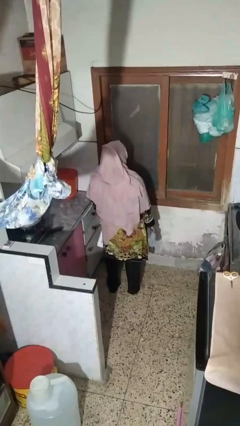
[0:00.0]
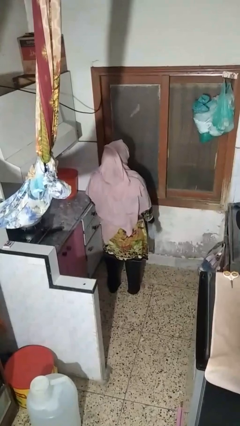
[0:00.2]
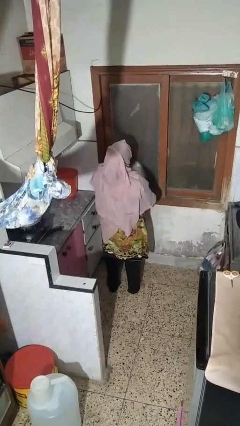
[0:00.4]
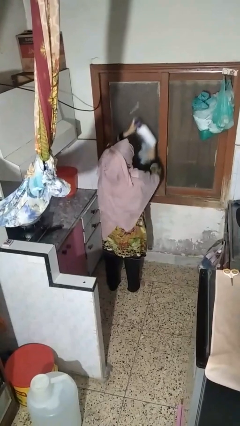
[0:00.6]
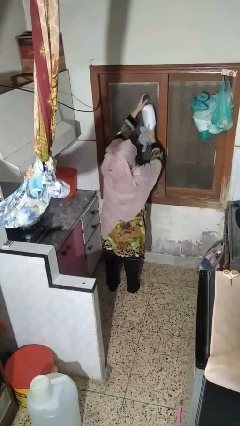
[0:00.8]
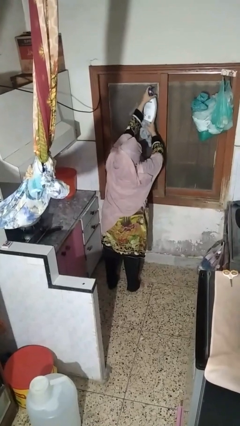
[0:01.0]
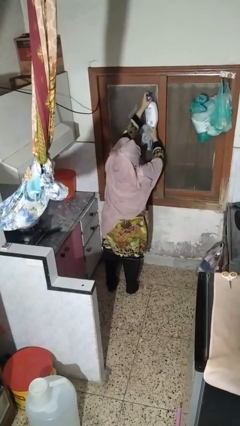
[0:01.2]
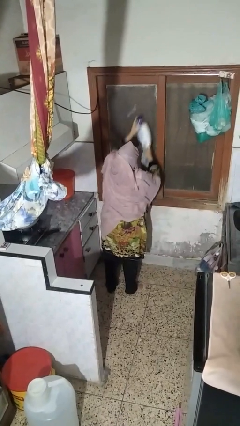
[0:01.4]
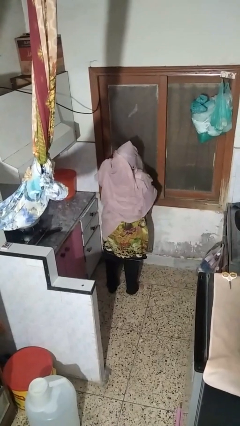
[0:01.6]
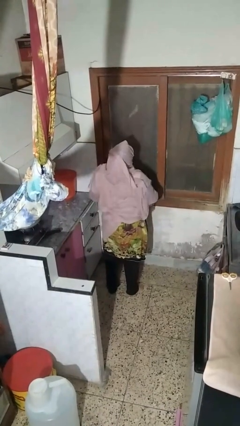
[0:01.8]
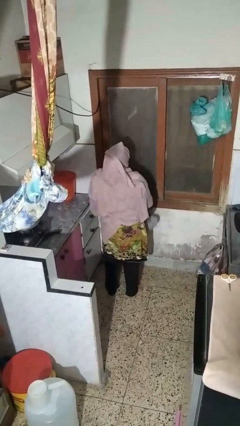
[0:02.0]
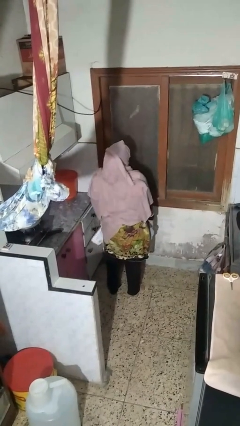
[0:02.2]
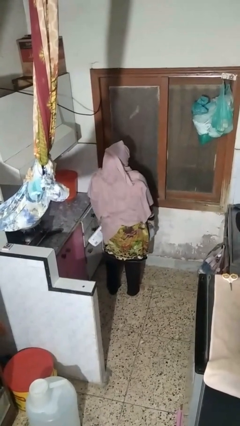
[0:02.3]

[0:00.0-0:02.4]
person sprays from bottle

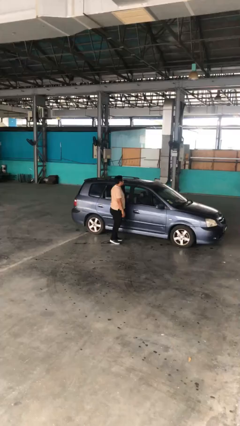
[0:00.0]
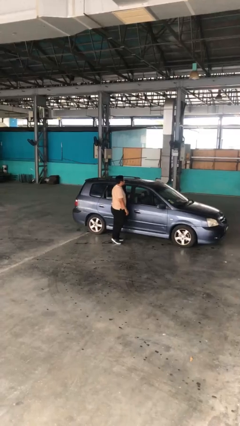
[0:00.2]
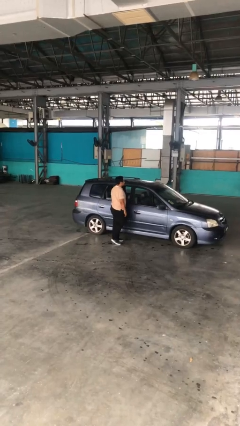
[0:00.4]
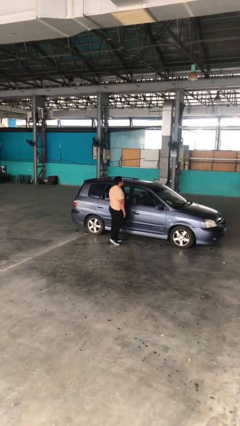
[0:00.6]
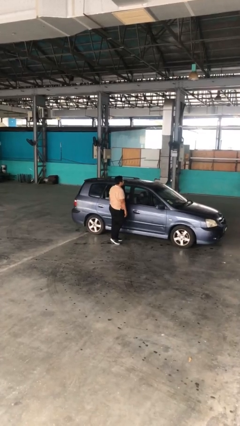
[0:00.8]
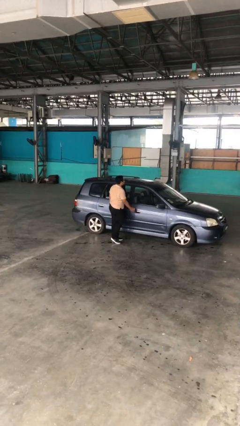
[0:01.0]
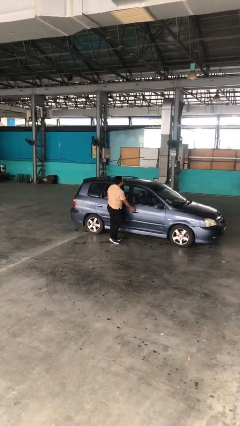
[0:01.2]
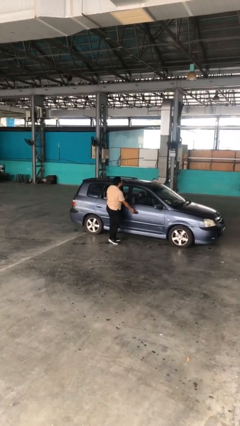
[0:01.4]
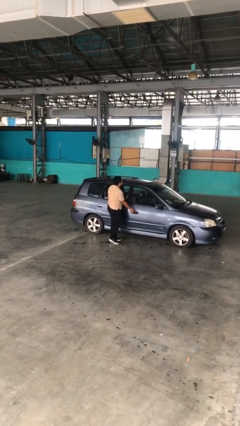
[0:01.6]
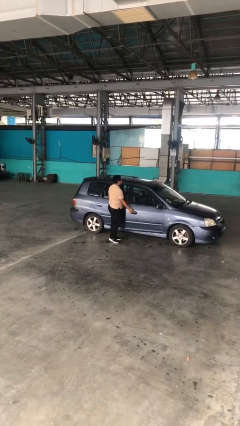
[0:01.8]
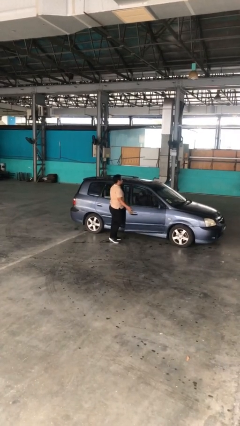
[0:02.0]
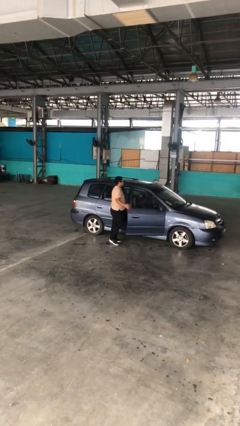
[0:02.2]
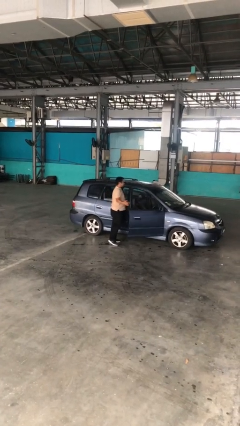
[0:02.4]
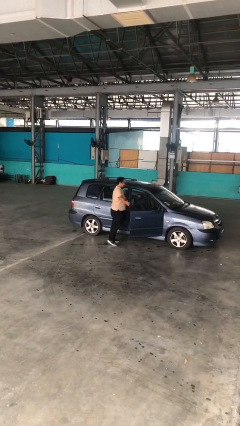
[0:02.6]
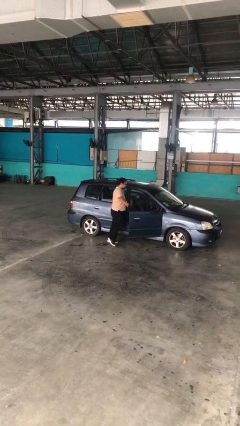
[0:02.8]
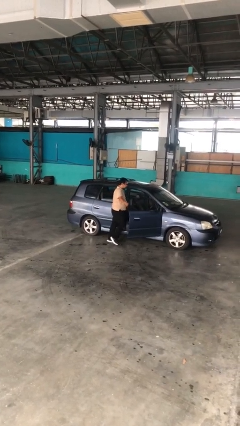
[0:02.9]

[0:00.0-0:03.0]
person opens car door

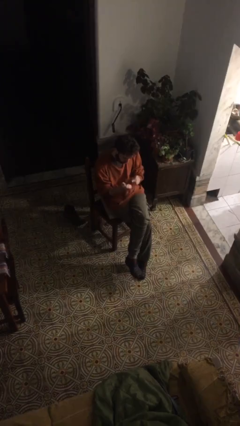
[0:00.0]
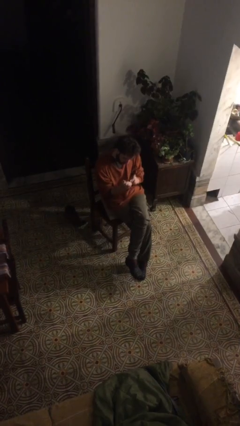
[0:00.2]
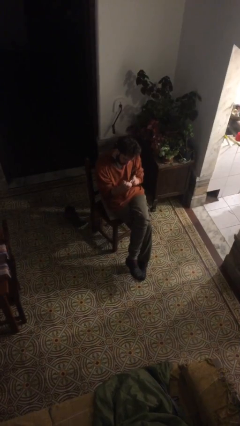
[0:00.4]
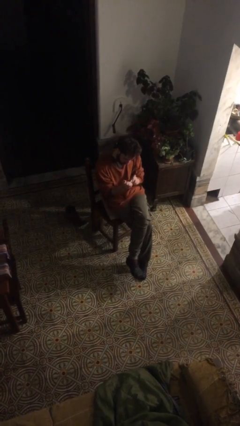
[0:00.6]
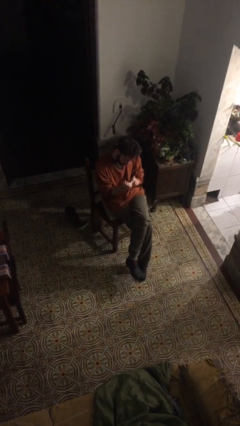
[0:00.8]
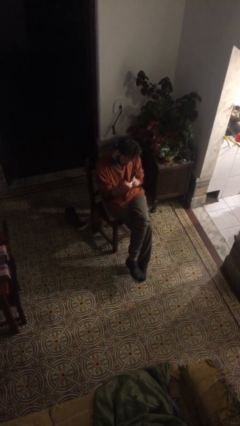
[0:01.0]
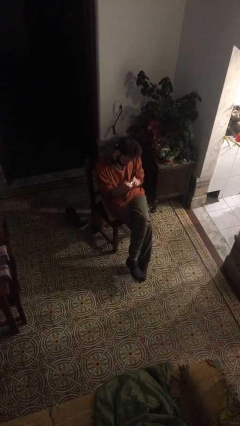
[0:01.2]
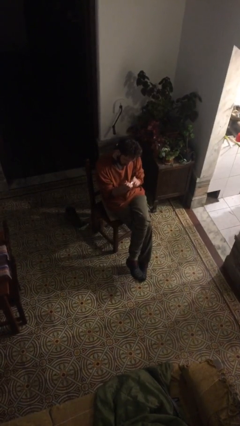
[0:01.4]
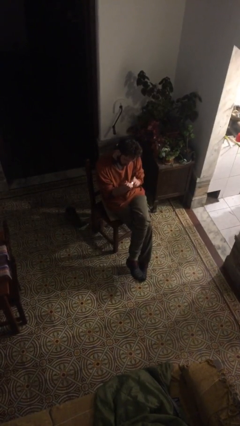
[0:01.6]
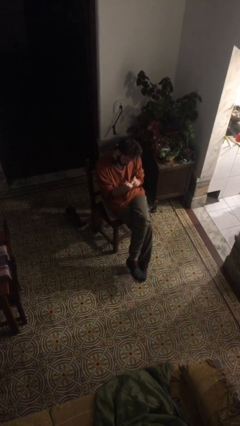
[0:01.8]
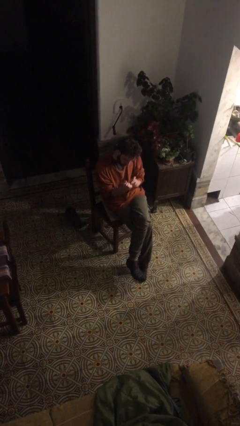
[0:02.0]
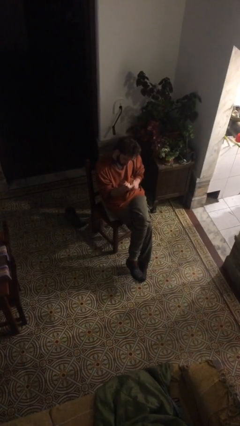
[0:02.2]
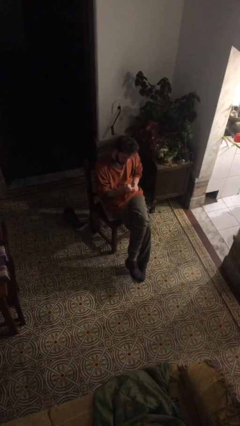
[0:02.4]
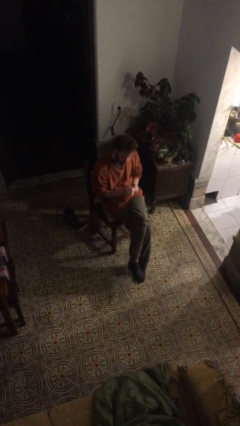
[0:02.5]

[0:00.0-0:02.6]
person clips fingernails

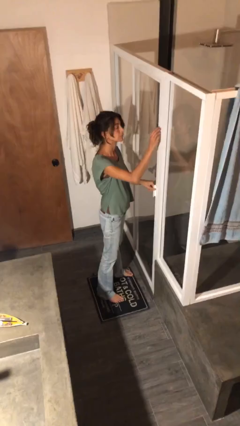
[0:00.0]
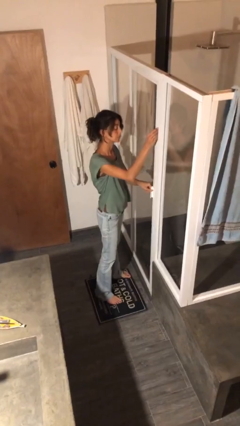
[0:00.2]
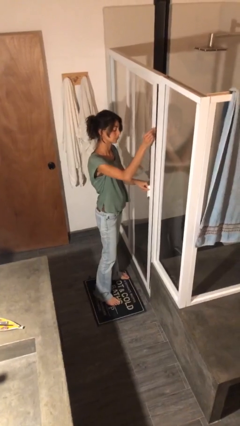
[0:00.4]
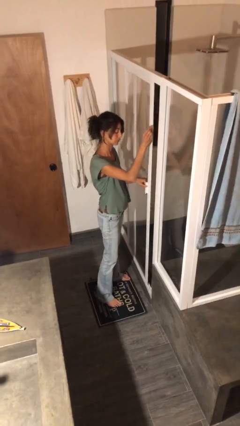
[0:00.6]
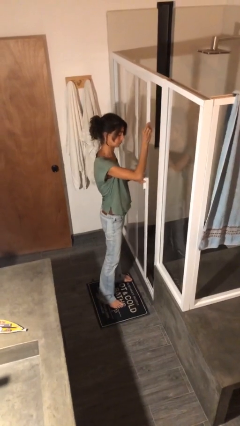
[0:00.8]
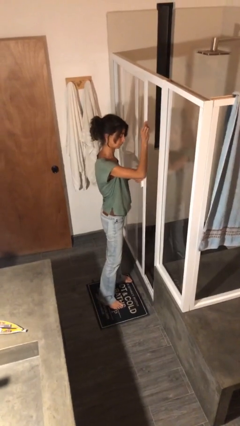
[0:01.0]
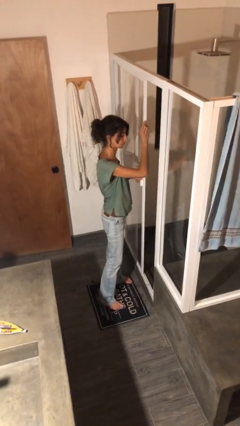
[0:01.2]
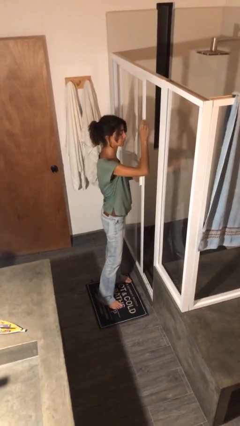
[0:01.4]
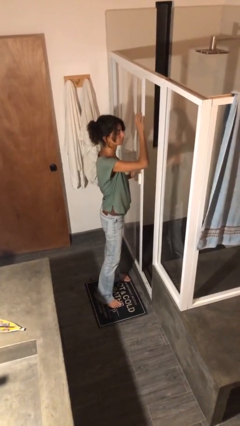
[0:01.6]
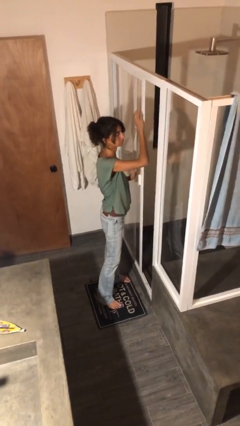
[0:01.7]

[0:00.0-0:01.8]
person opens sliding door

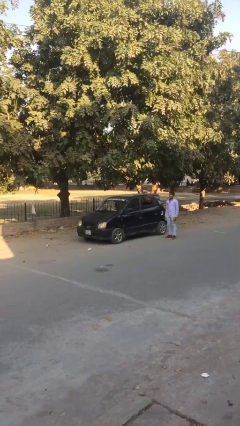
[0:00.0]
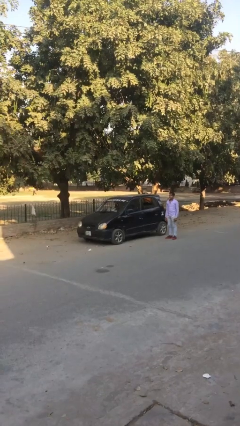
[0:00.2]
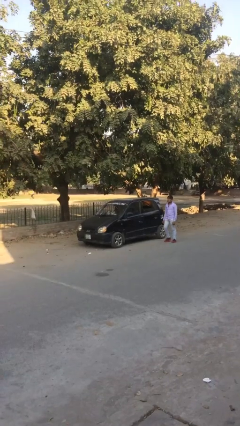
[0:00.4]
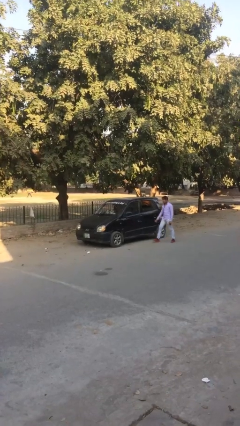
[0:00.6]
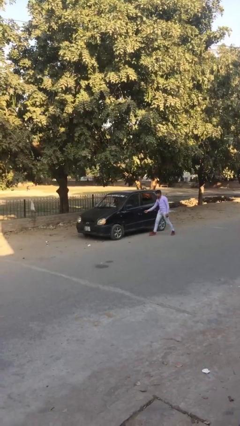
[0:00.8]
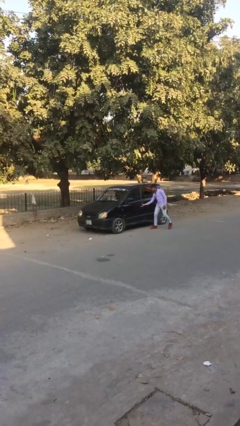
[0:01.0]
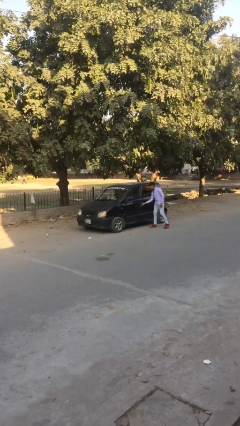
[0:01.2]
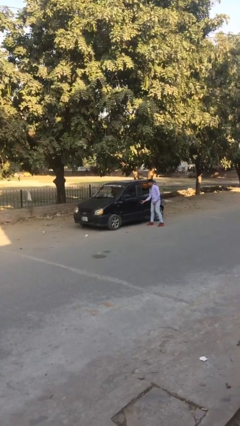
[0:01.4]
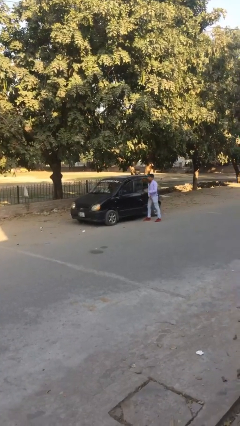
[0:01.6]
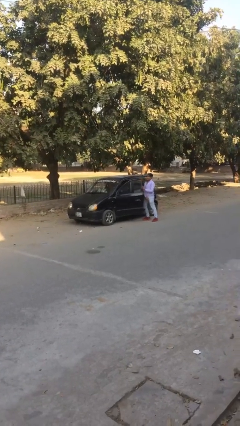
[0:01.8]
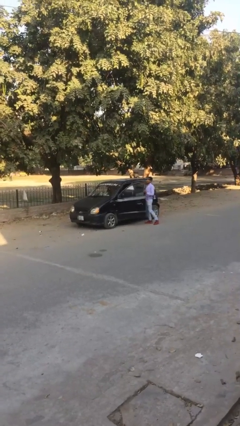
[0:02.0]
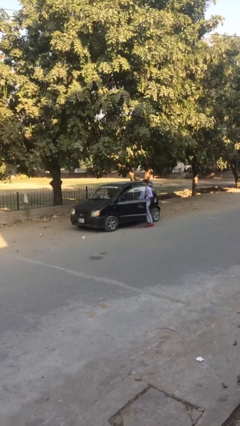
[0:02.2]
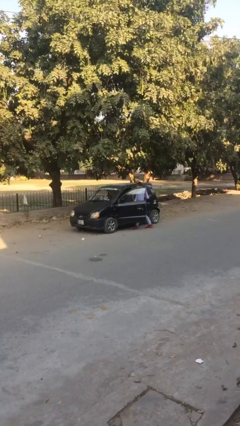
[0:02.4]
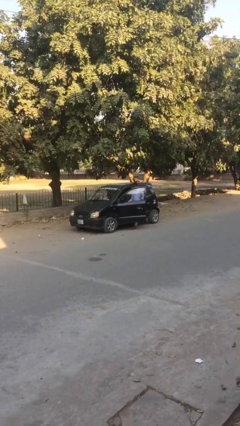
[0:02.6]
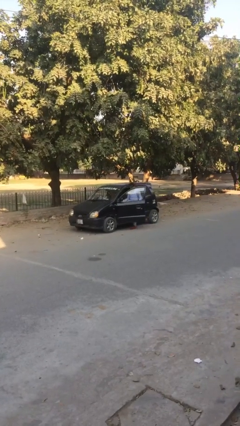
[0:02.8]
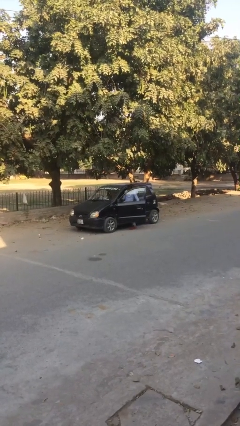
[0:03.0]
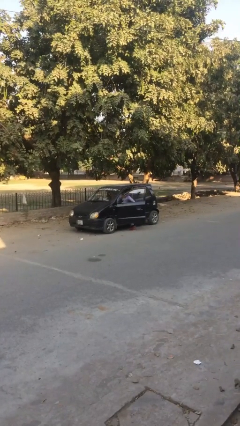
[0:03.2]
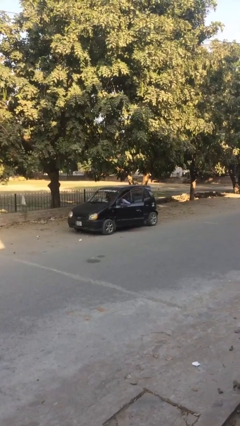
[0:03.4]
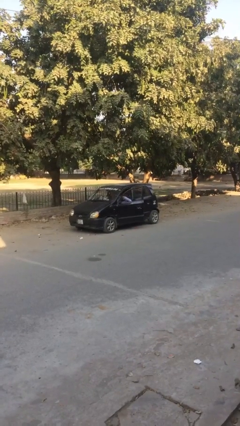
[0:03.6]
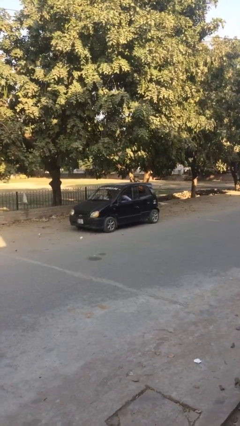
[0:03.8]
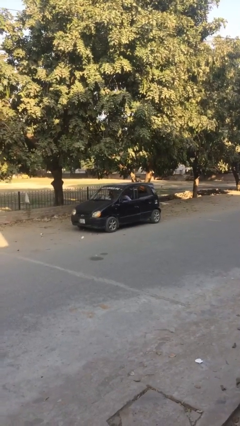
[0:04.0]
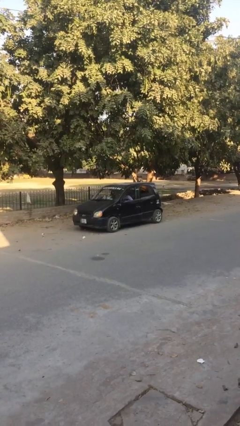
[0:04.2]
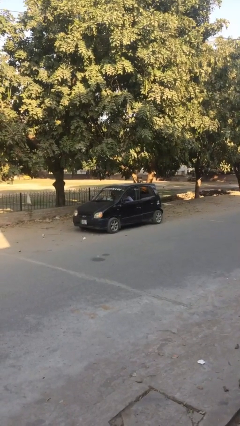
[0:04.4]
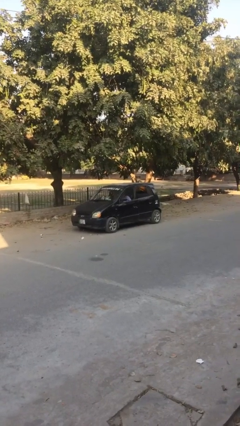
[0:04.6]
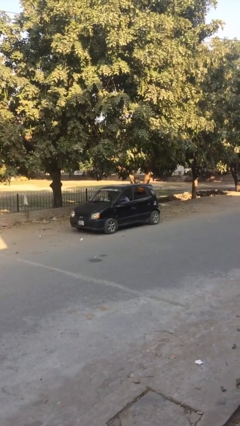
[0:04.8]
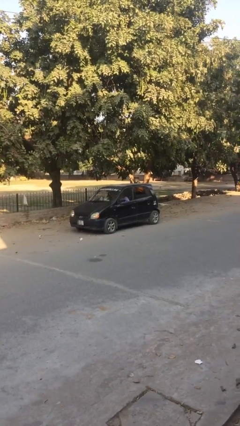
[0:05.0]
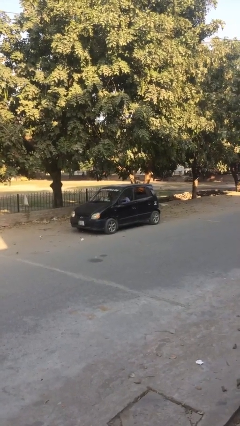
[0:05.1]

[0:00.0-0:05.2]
car picks up person

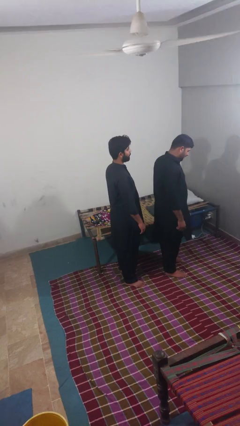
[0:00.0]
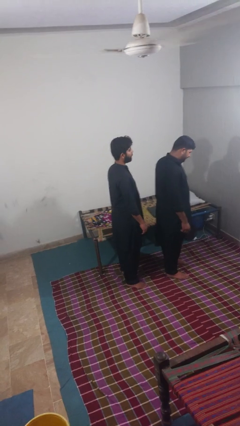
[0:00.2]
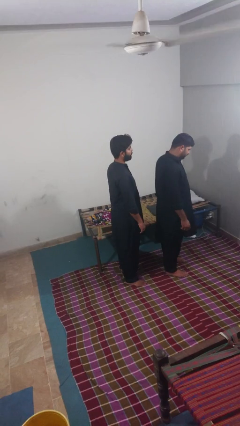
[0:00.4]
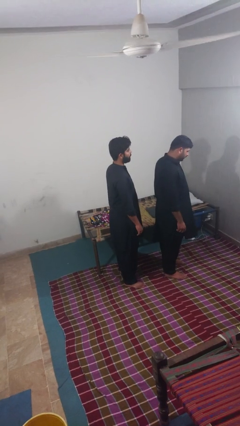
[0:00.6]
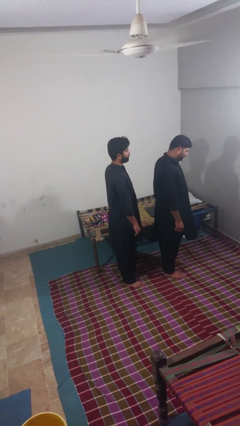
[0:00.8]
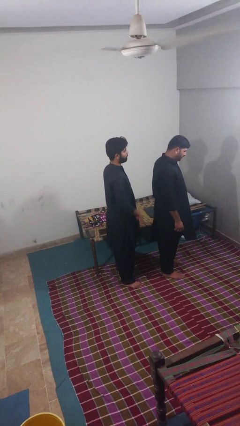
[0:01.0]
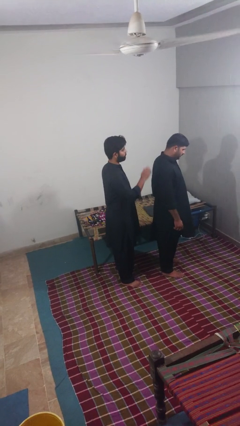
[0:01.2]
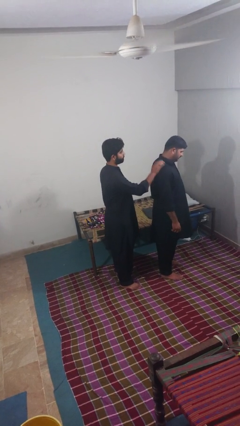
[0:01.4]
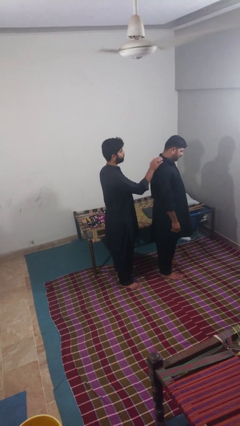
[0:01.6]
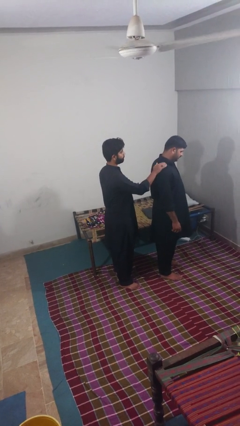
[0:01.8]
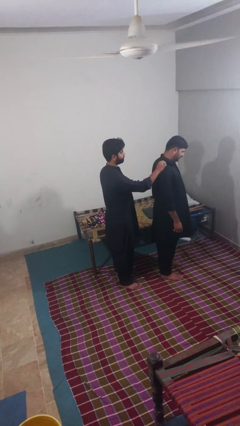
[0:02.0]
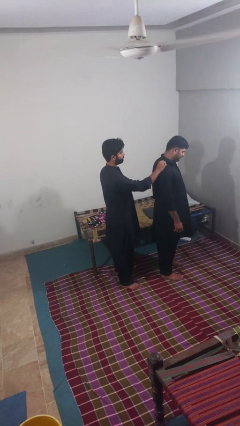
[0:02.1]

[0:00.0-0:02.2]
person touches back of person

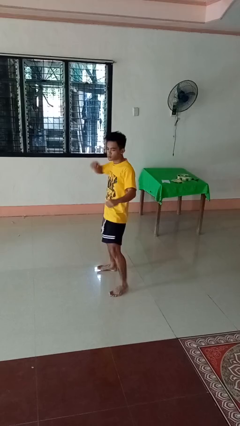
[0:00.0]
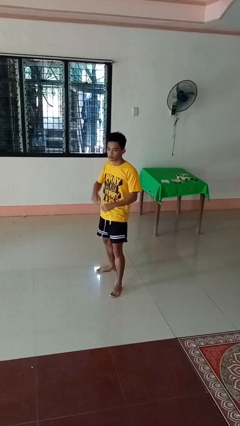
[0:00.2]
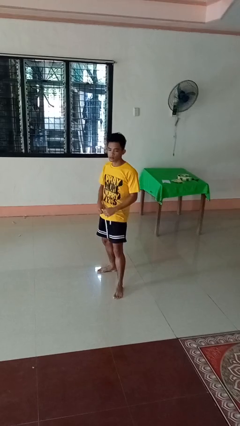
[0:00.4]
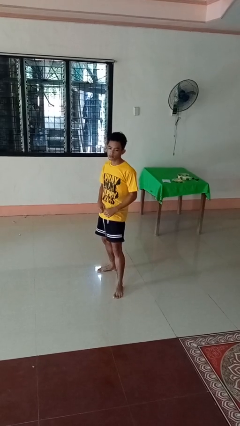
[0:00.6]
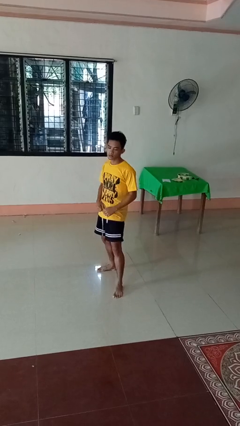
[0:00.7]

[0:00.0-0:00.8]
person karate chop
